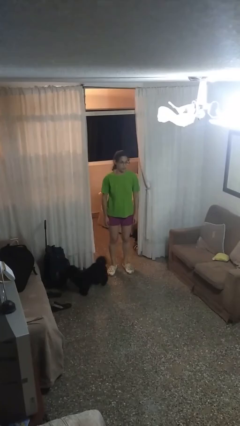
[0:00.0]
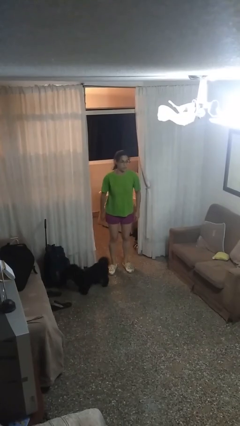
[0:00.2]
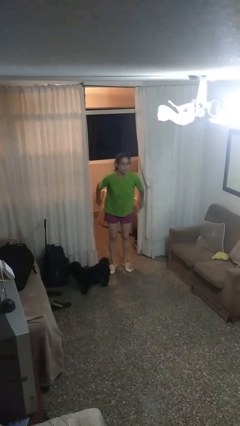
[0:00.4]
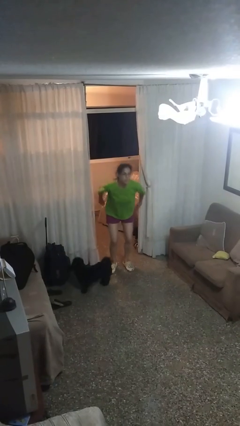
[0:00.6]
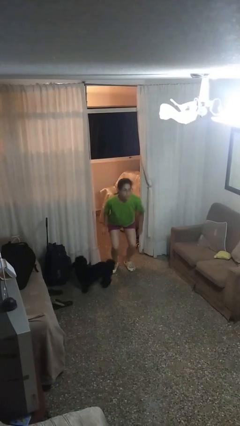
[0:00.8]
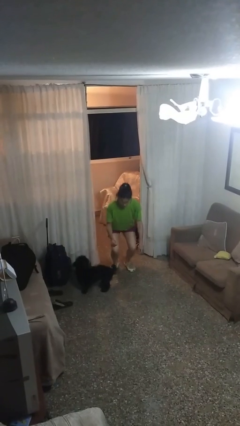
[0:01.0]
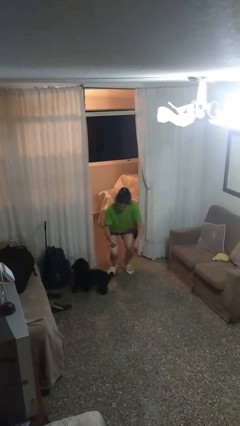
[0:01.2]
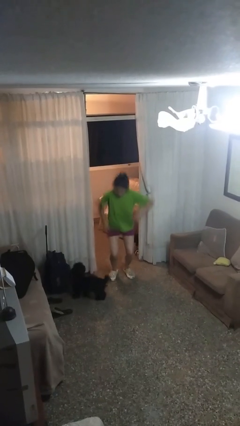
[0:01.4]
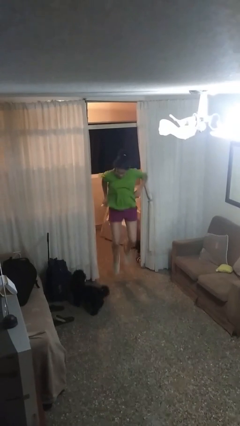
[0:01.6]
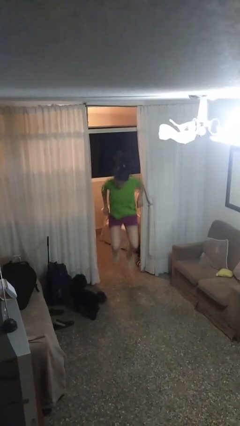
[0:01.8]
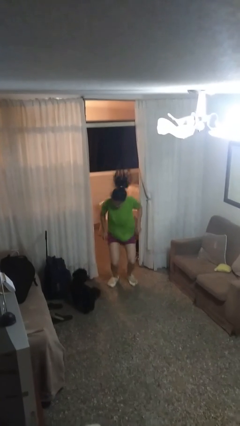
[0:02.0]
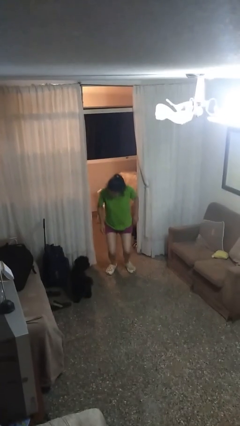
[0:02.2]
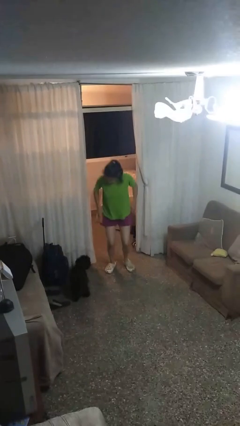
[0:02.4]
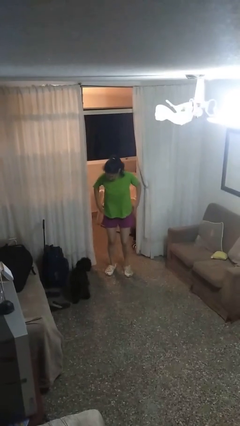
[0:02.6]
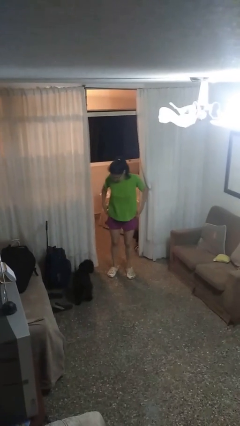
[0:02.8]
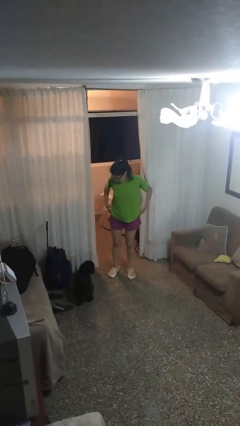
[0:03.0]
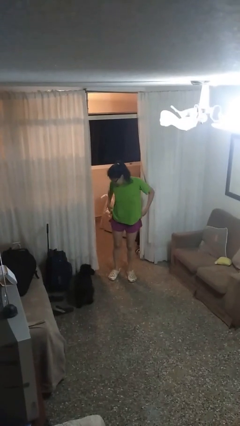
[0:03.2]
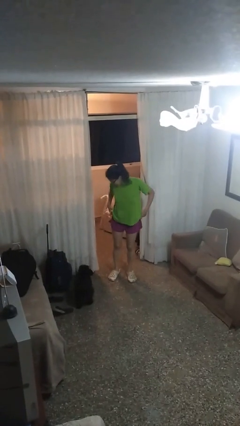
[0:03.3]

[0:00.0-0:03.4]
person jumps

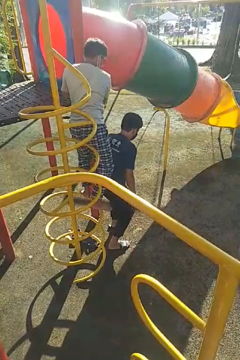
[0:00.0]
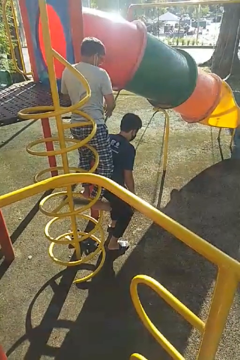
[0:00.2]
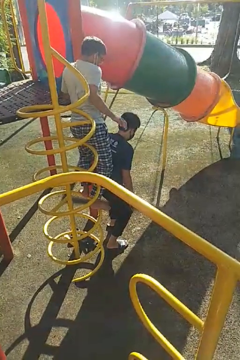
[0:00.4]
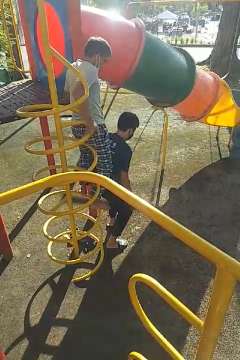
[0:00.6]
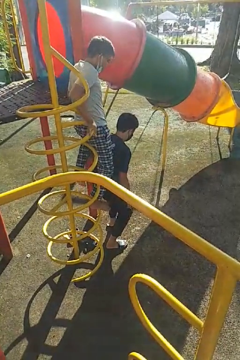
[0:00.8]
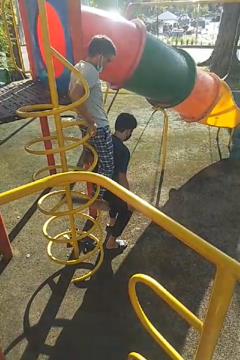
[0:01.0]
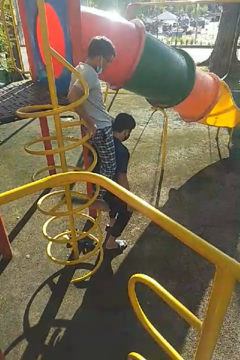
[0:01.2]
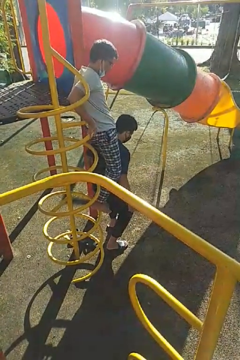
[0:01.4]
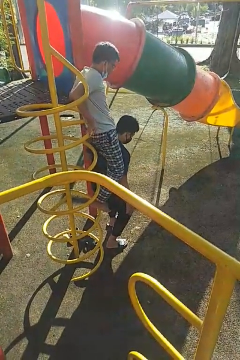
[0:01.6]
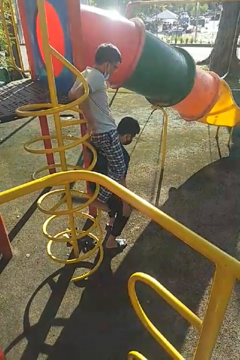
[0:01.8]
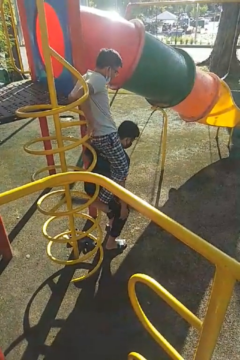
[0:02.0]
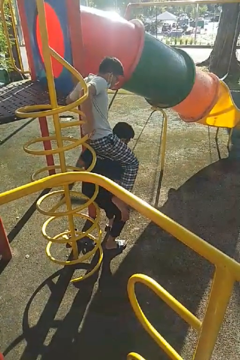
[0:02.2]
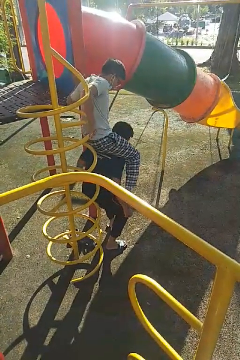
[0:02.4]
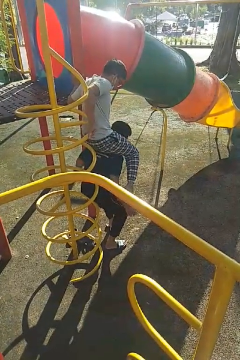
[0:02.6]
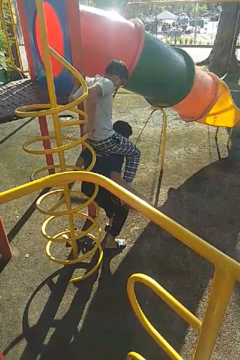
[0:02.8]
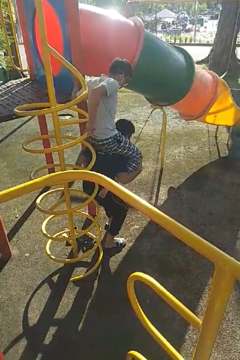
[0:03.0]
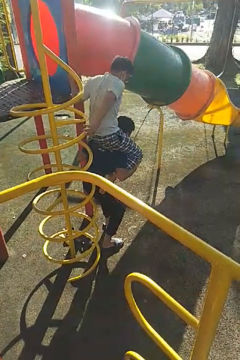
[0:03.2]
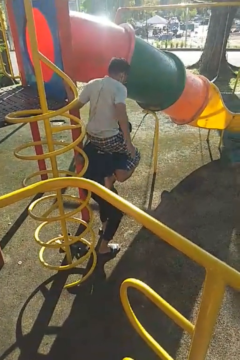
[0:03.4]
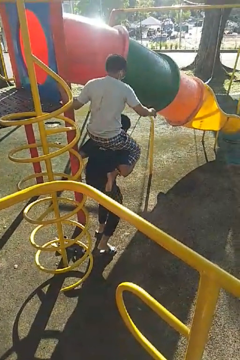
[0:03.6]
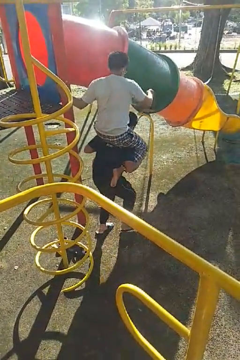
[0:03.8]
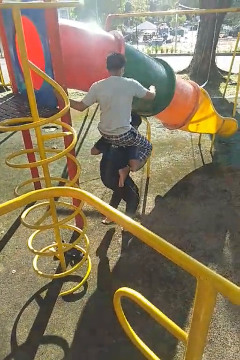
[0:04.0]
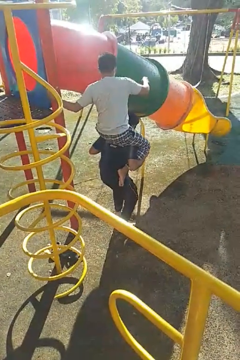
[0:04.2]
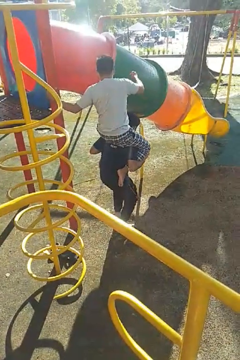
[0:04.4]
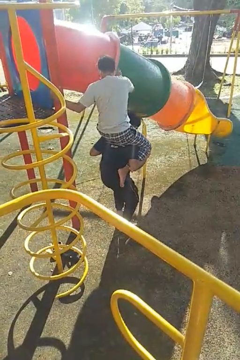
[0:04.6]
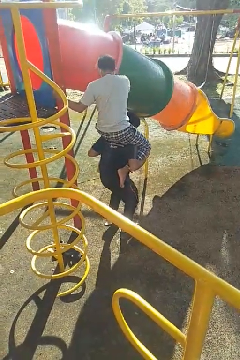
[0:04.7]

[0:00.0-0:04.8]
person carries person on shoulders

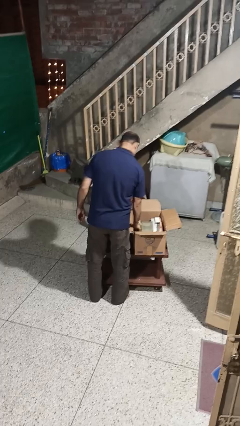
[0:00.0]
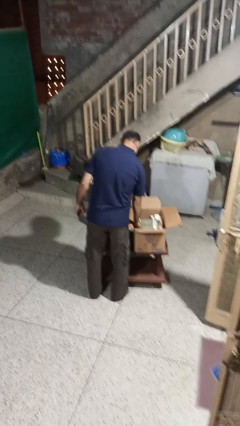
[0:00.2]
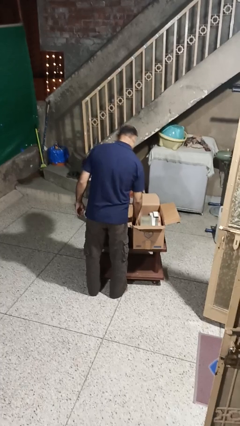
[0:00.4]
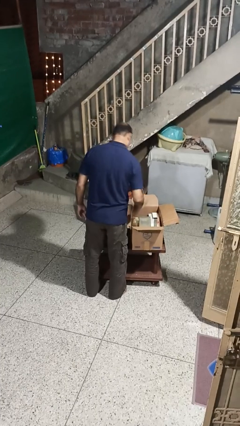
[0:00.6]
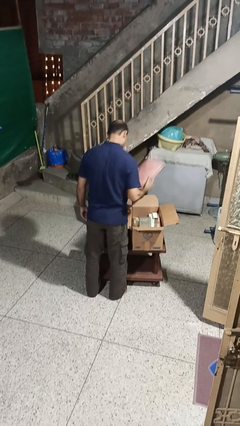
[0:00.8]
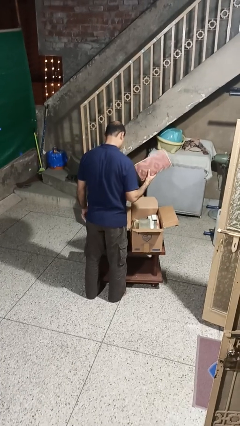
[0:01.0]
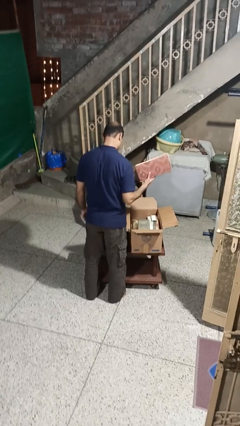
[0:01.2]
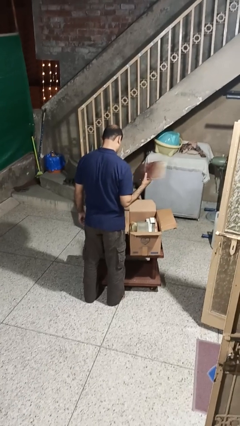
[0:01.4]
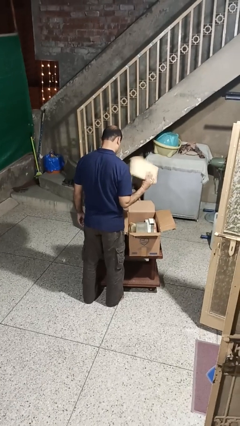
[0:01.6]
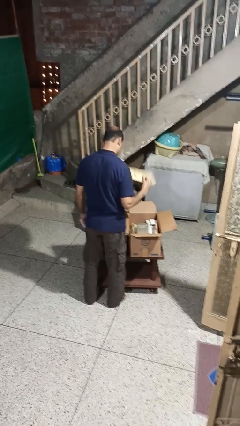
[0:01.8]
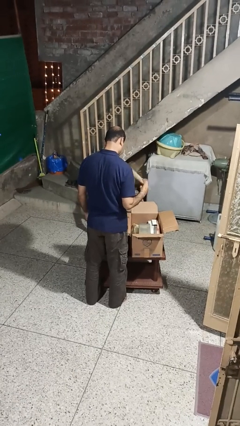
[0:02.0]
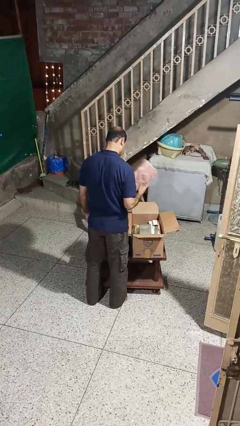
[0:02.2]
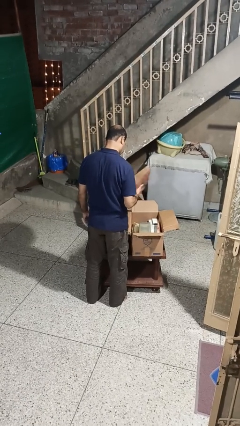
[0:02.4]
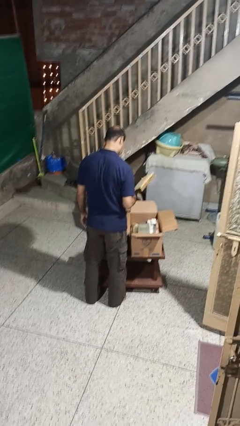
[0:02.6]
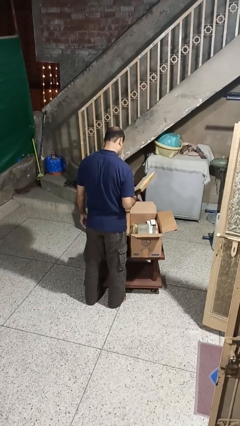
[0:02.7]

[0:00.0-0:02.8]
person takes object from box

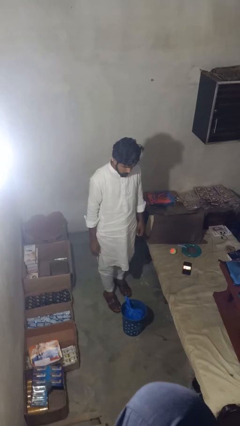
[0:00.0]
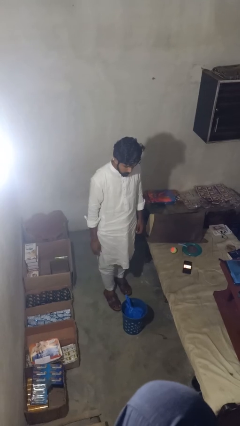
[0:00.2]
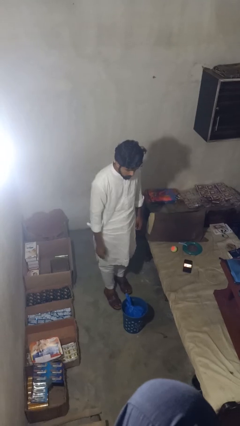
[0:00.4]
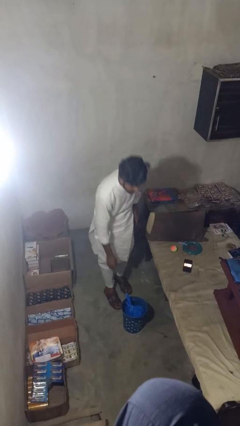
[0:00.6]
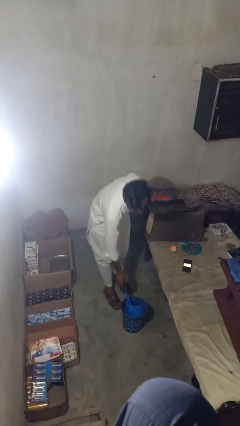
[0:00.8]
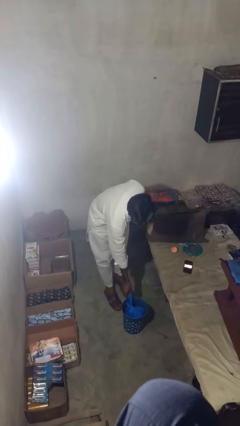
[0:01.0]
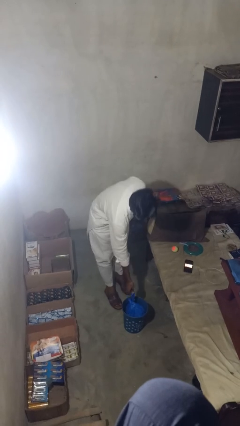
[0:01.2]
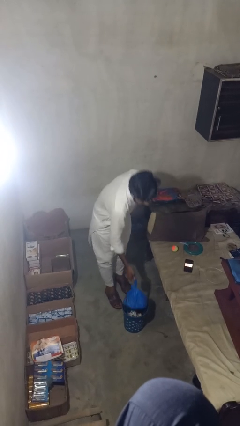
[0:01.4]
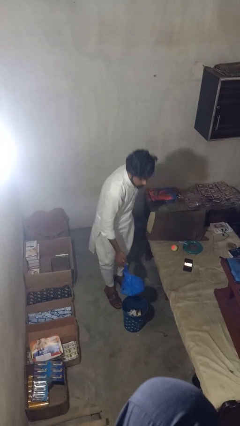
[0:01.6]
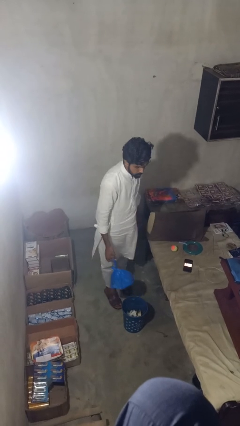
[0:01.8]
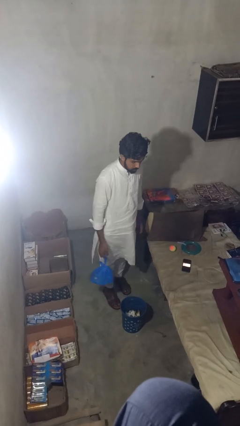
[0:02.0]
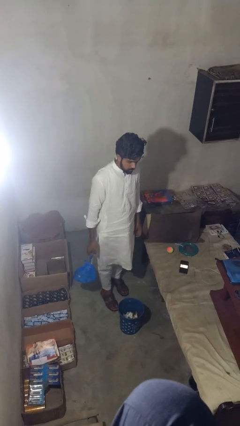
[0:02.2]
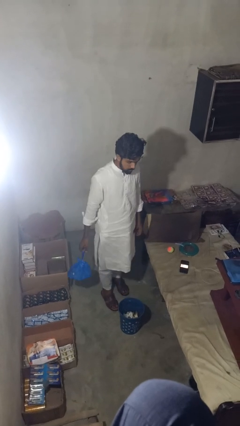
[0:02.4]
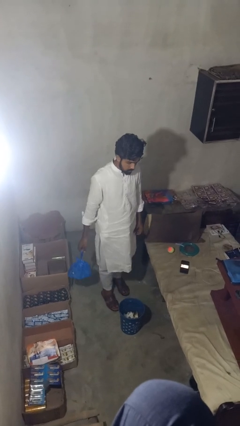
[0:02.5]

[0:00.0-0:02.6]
person takes object from basket

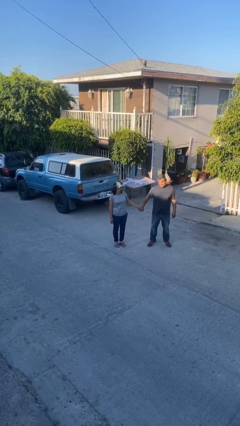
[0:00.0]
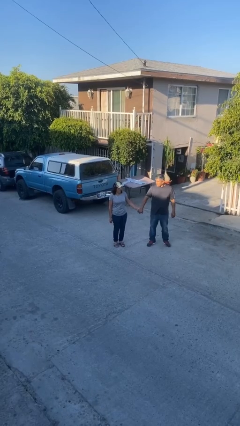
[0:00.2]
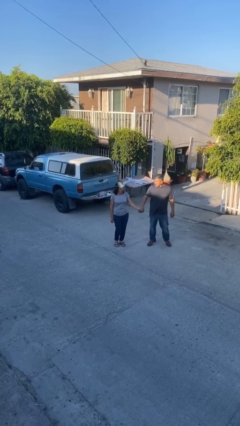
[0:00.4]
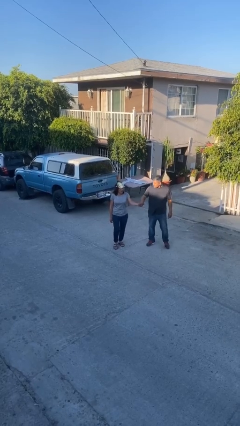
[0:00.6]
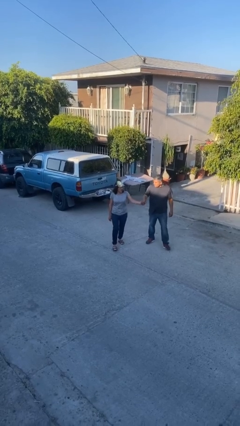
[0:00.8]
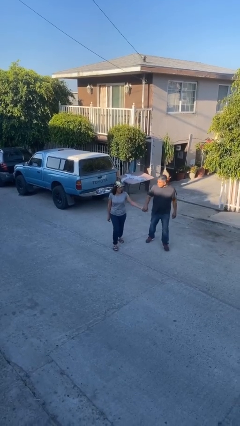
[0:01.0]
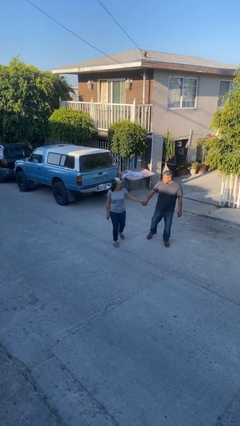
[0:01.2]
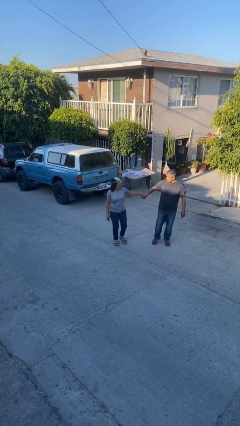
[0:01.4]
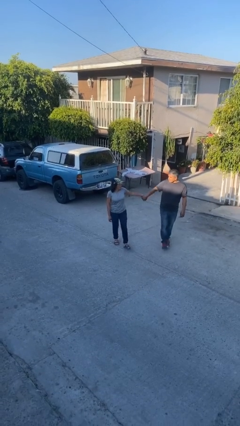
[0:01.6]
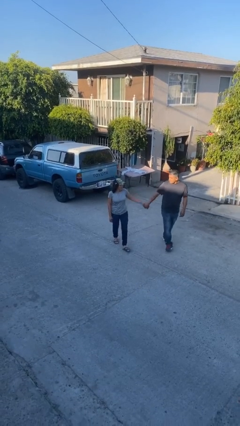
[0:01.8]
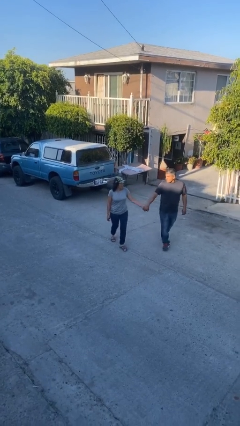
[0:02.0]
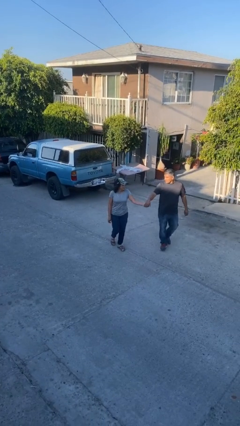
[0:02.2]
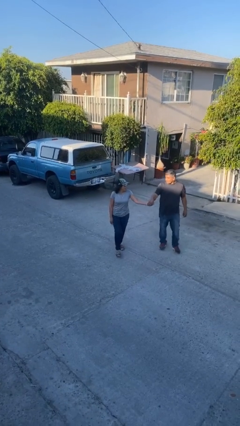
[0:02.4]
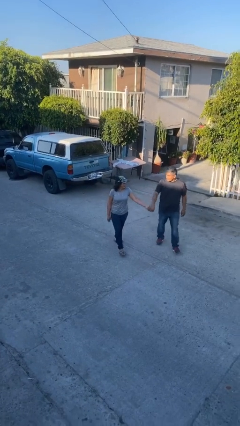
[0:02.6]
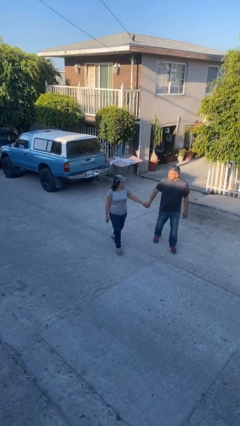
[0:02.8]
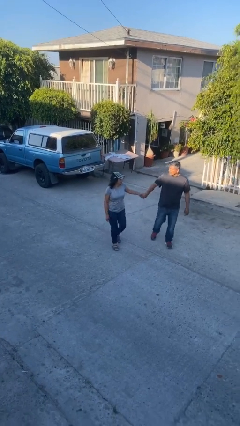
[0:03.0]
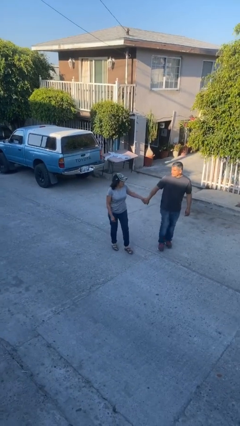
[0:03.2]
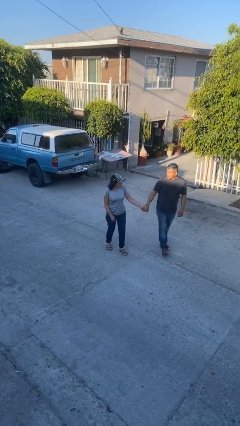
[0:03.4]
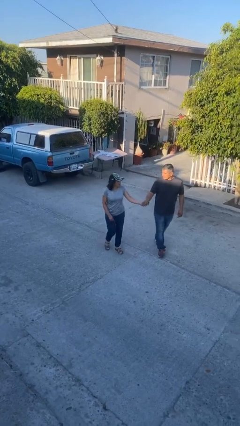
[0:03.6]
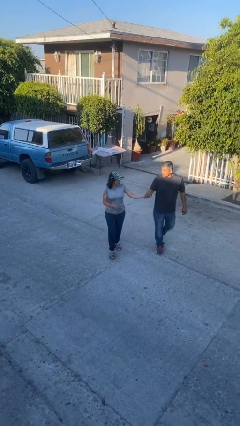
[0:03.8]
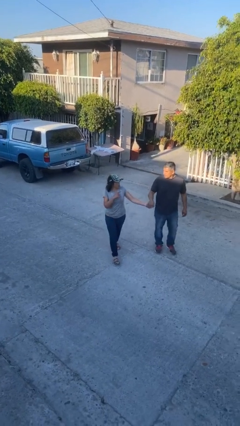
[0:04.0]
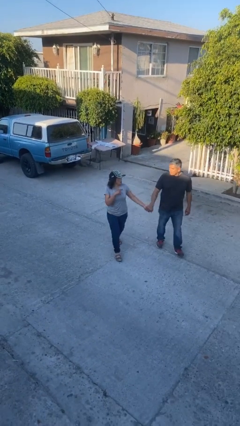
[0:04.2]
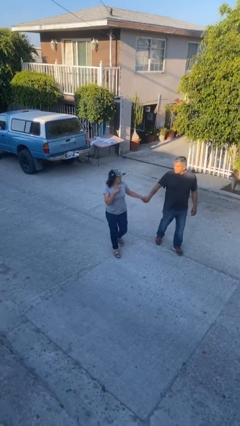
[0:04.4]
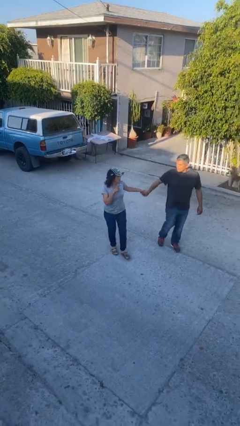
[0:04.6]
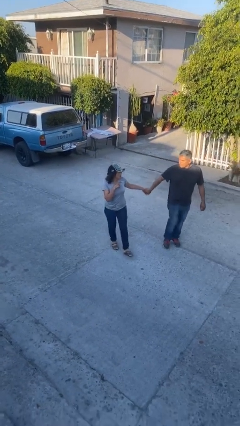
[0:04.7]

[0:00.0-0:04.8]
person holds hand

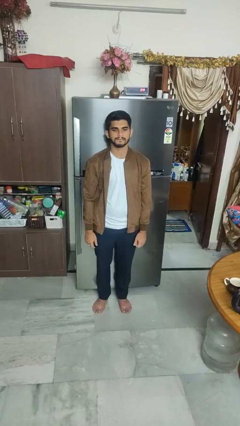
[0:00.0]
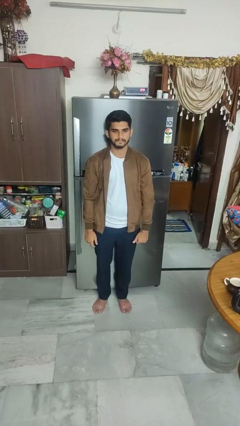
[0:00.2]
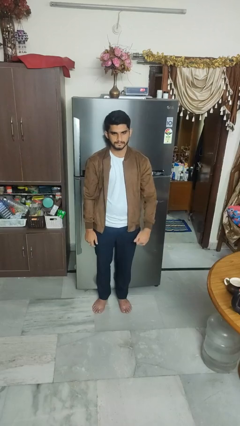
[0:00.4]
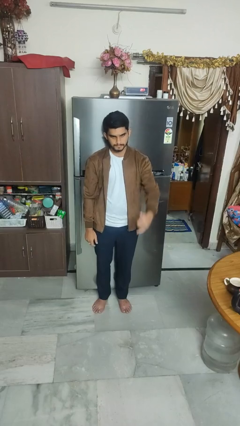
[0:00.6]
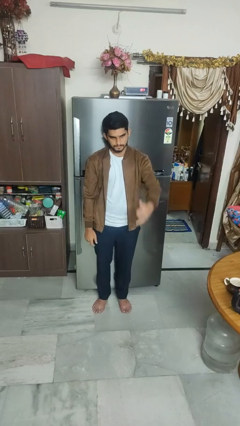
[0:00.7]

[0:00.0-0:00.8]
person gestures hang loose
